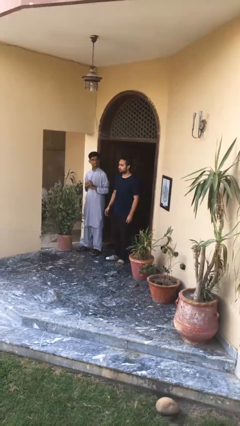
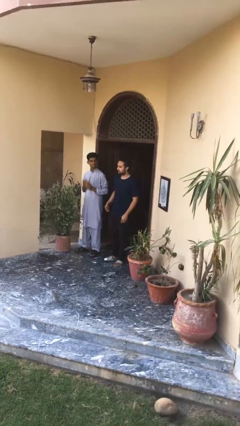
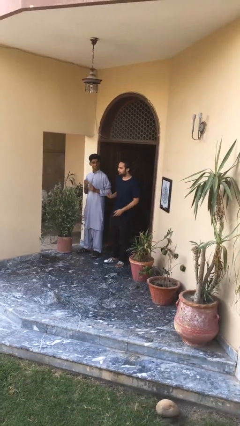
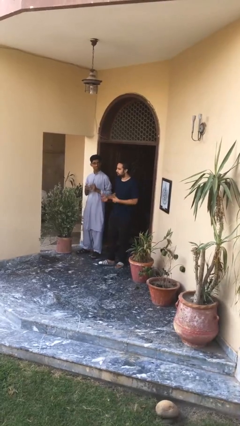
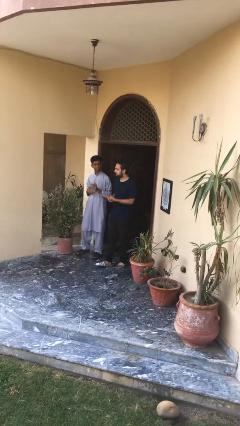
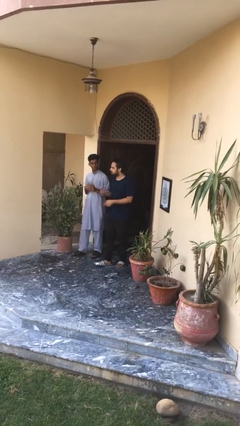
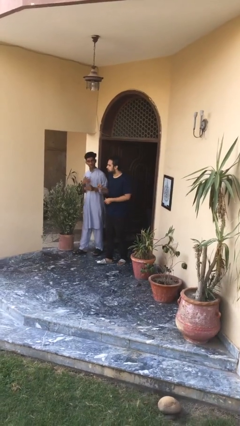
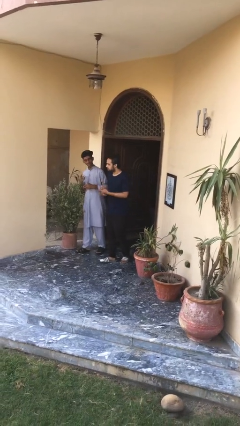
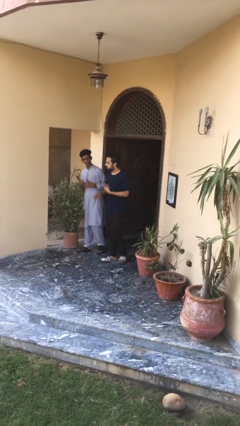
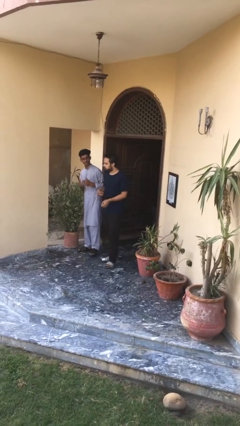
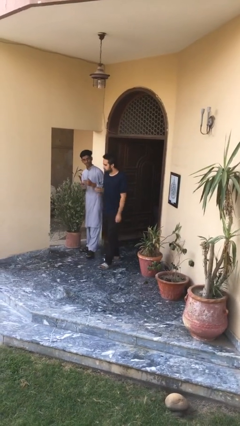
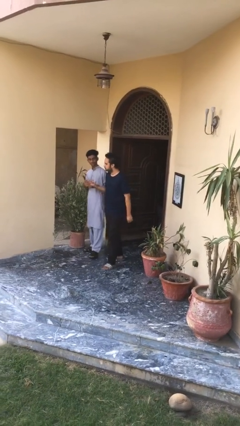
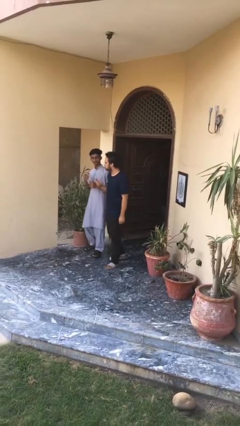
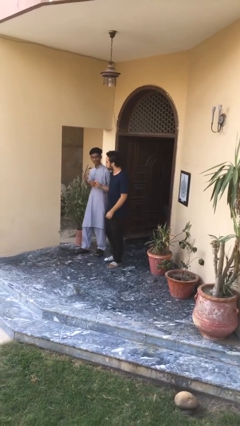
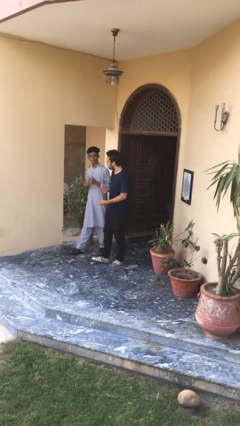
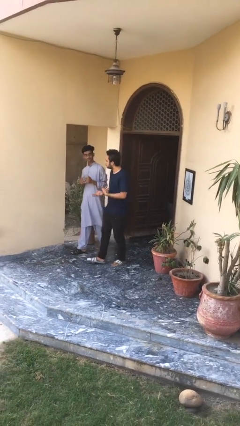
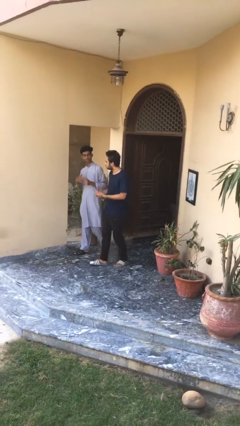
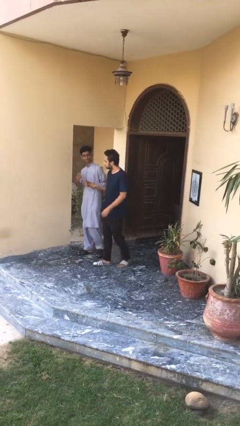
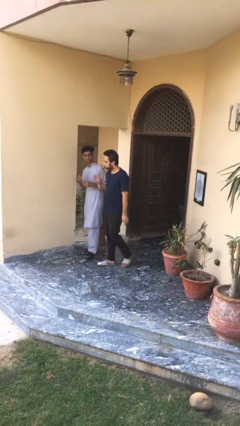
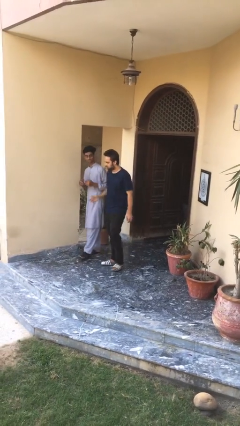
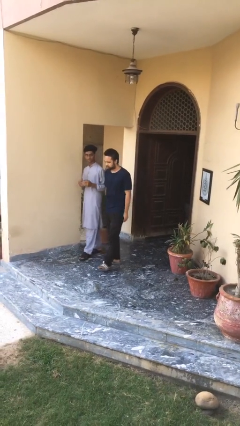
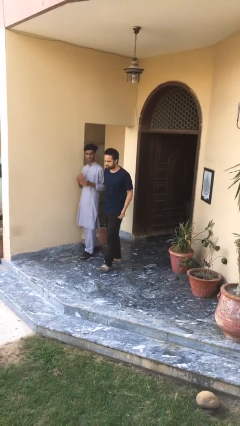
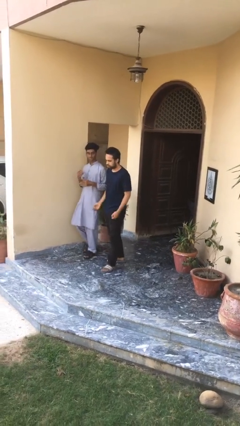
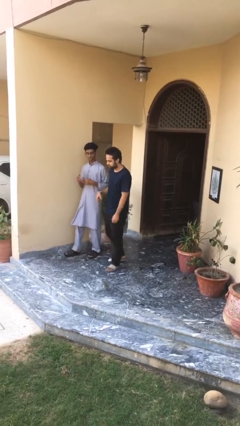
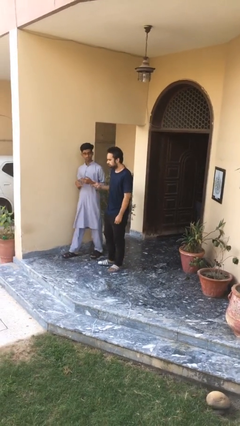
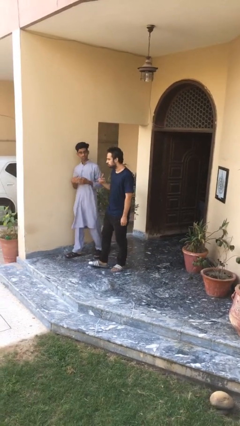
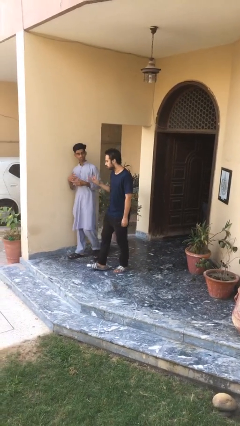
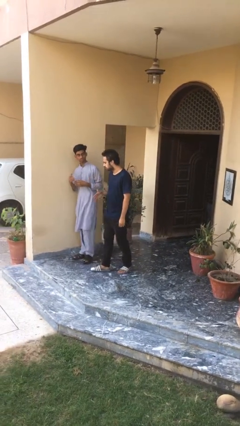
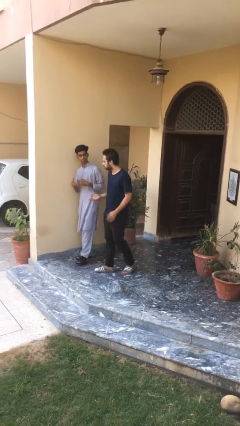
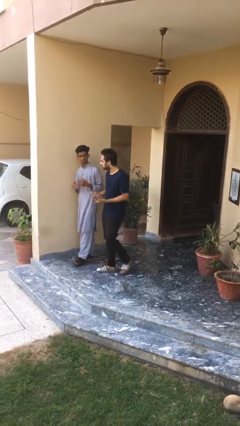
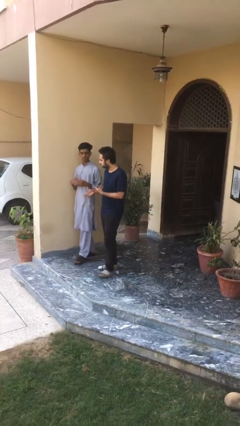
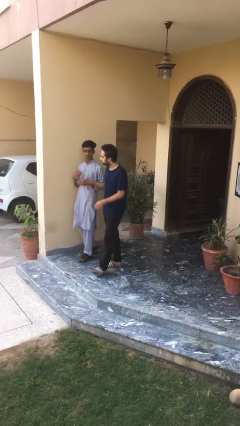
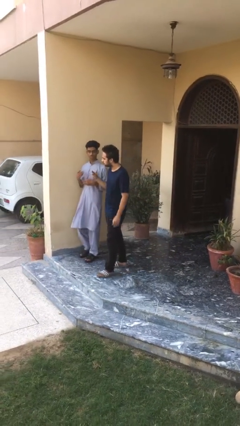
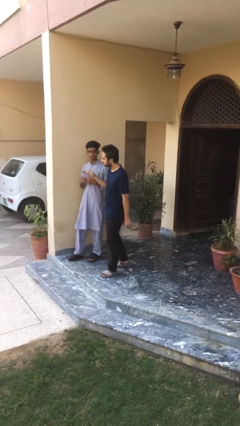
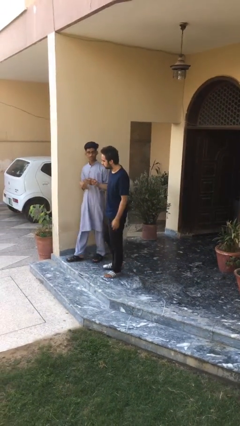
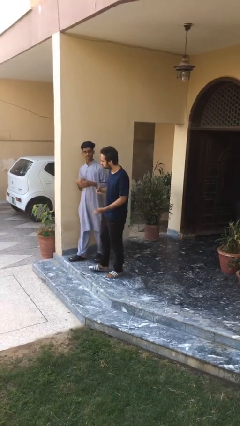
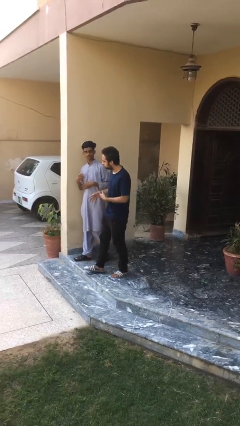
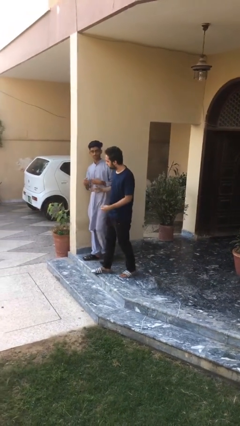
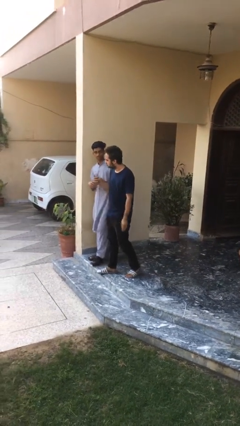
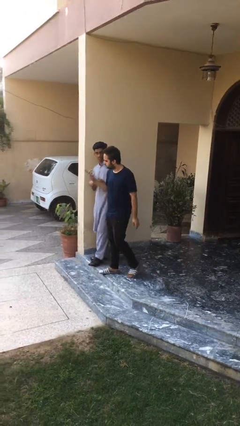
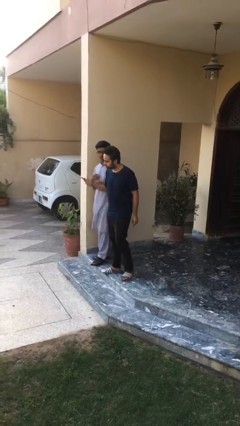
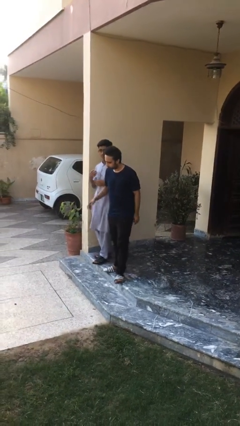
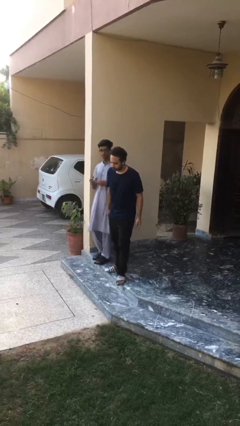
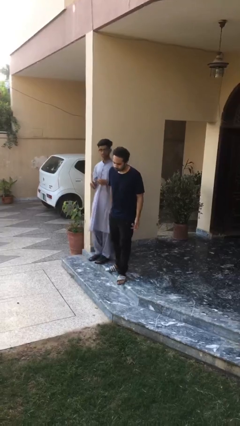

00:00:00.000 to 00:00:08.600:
person talks to person

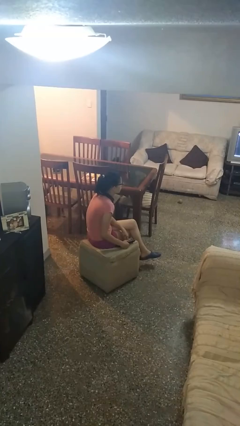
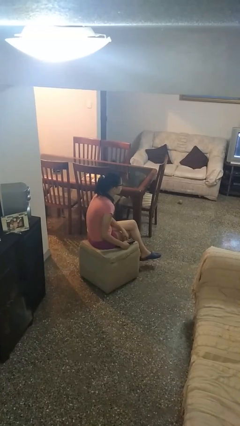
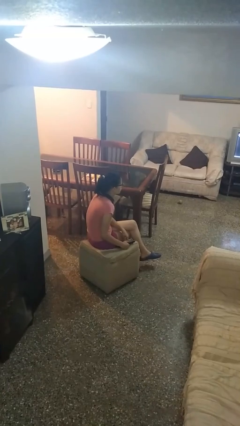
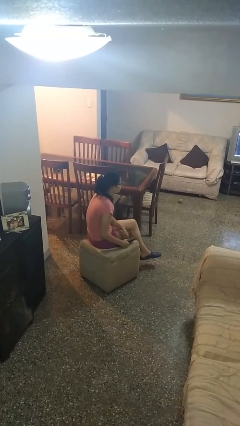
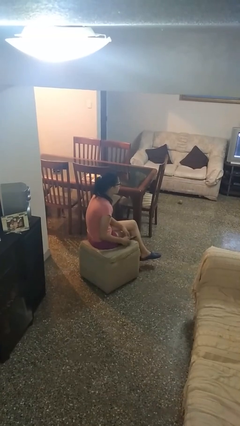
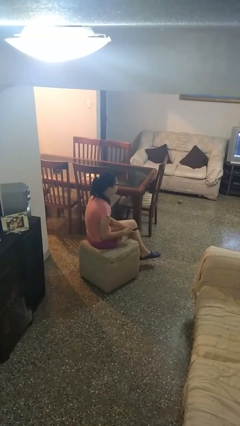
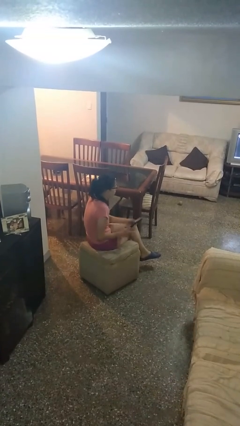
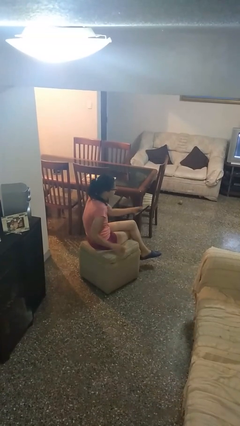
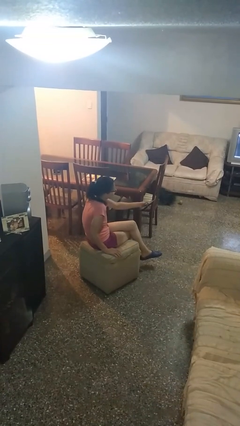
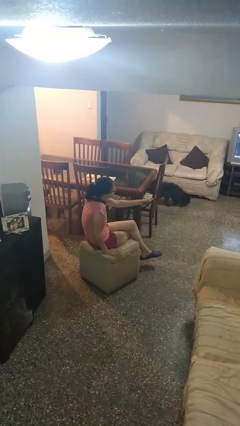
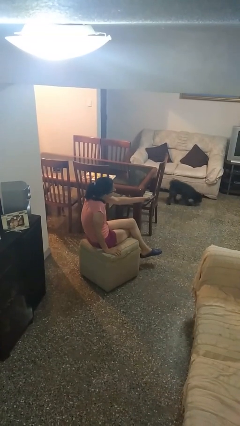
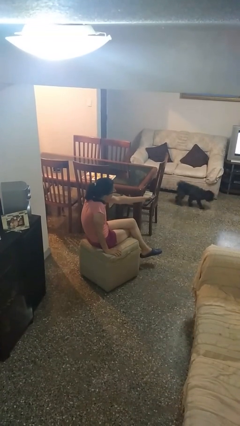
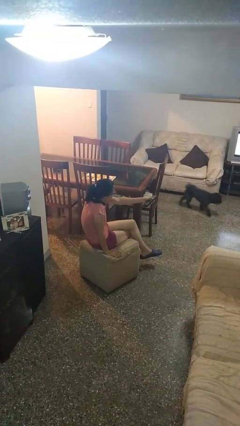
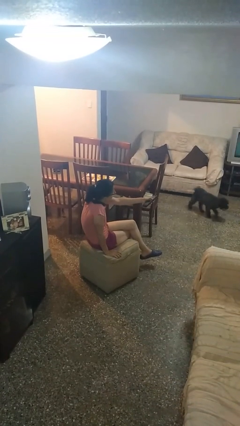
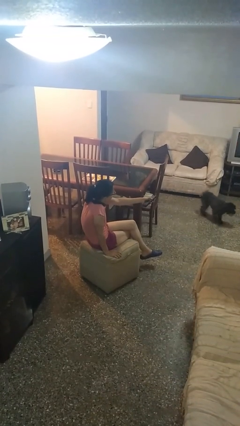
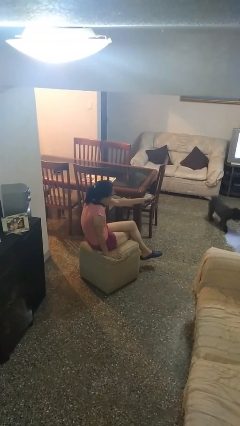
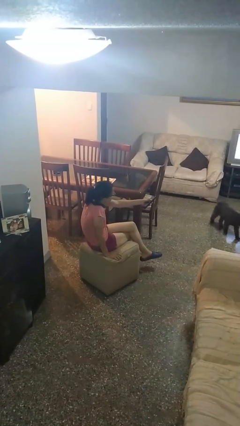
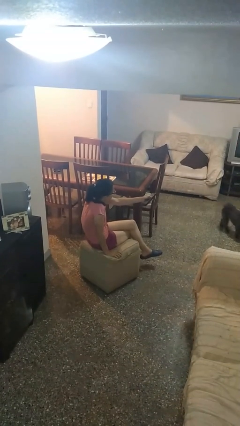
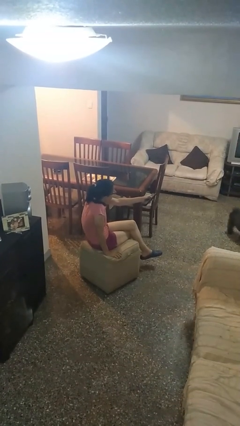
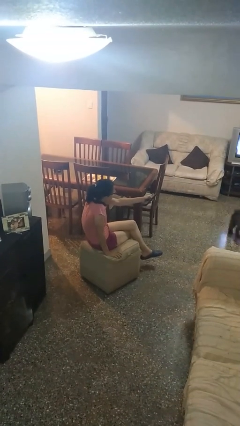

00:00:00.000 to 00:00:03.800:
person uses television remote

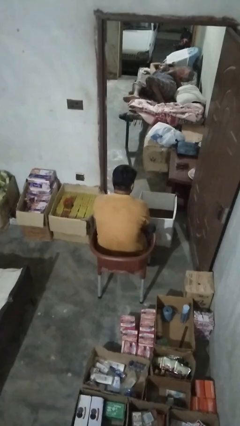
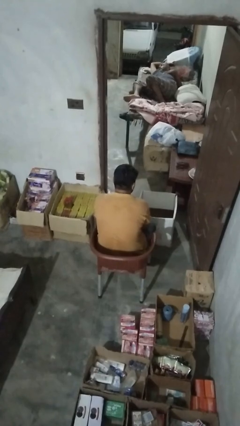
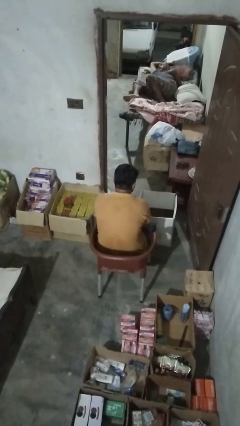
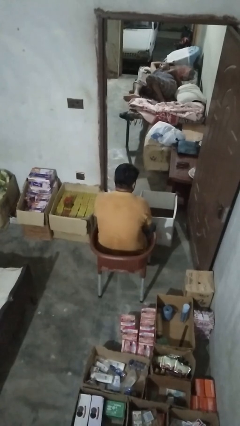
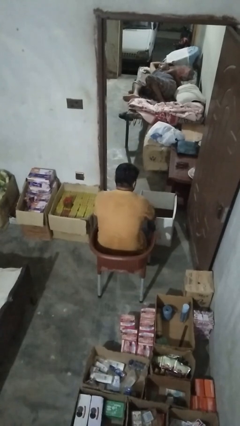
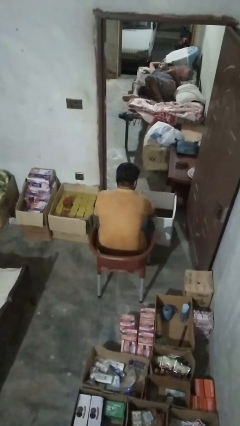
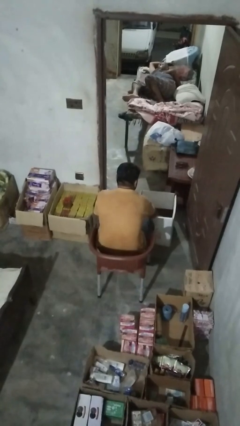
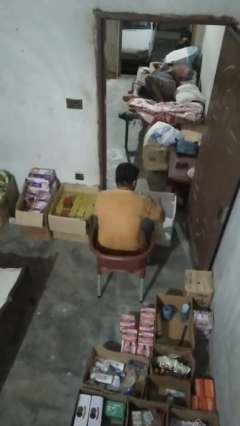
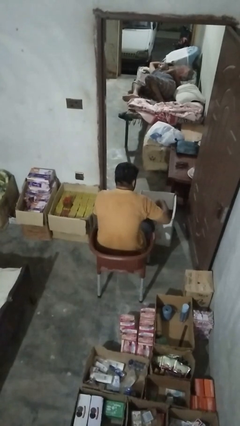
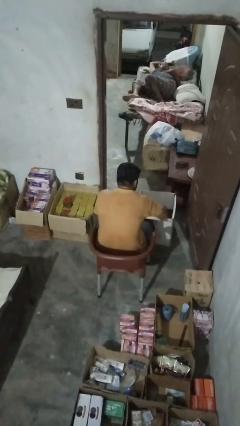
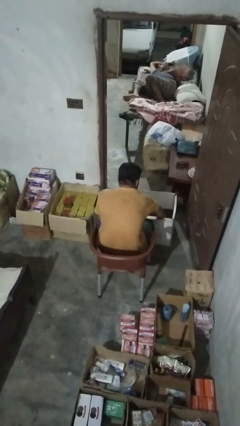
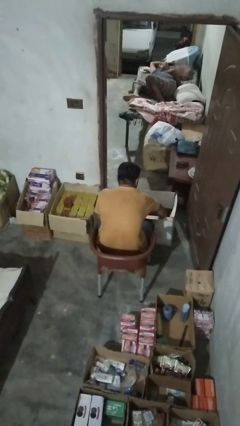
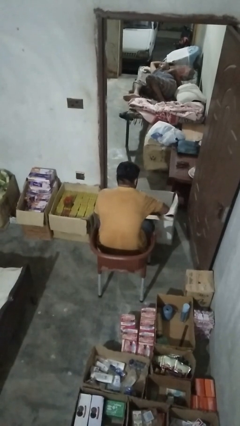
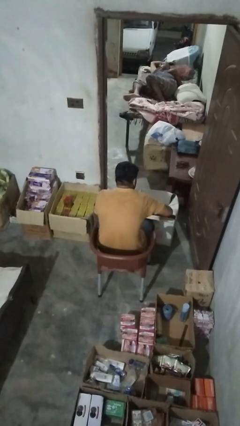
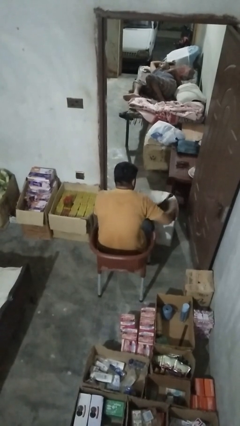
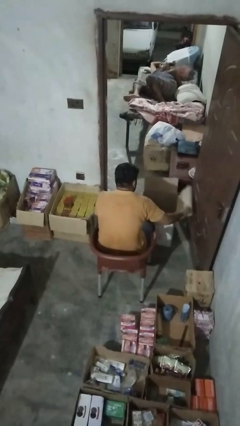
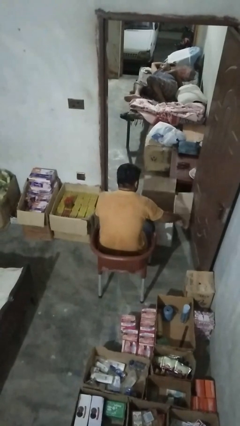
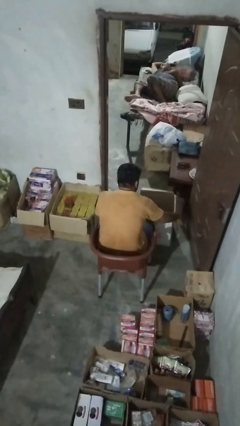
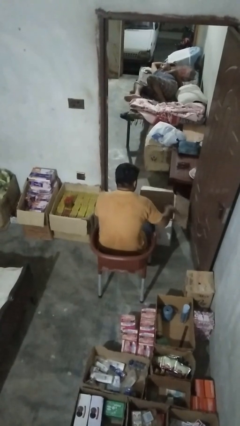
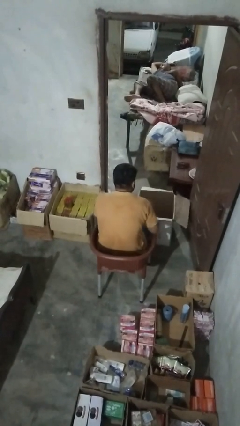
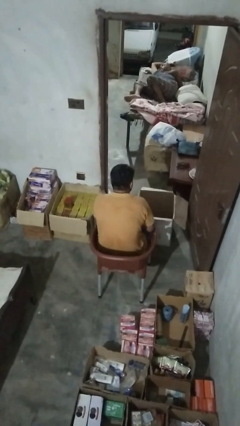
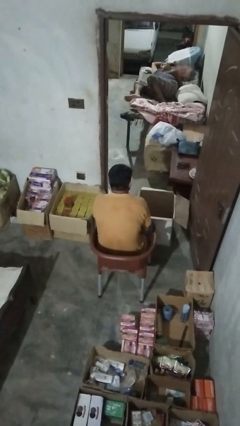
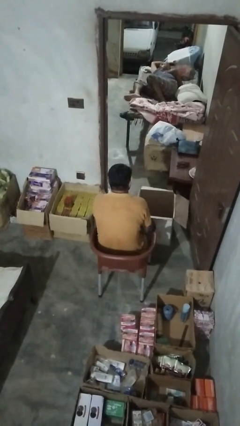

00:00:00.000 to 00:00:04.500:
person closes box

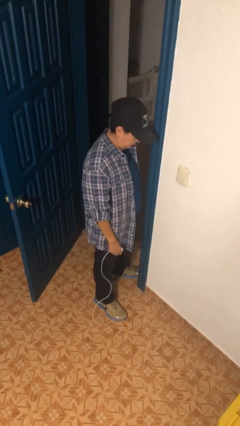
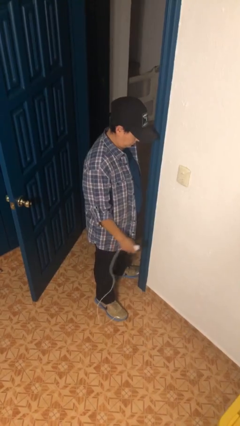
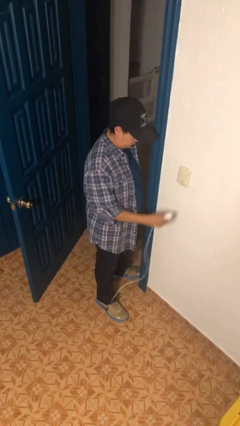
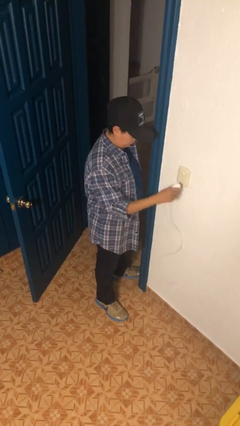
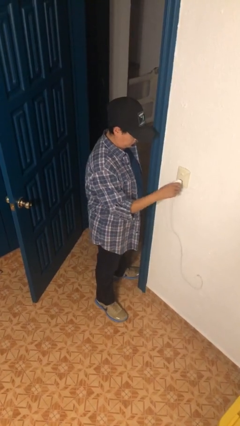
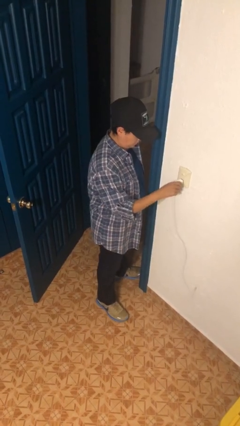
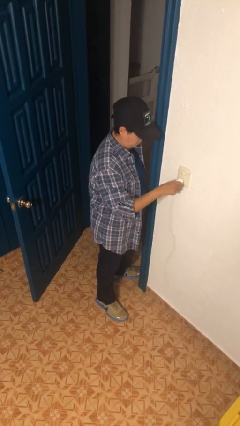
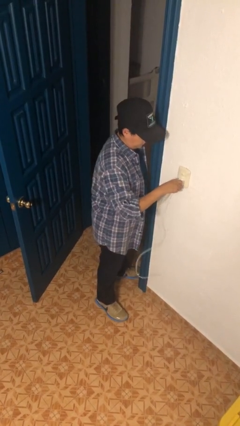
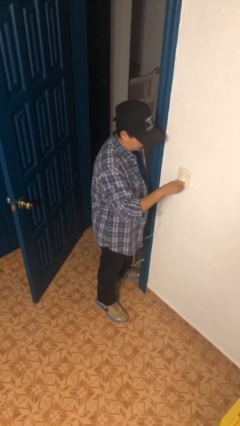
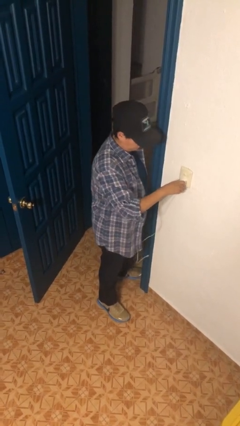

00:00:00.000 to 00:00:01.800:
person plugs into electrical socket
